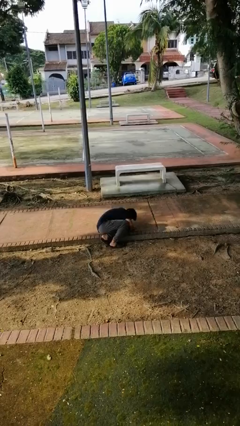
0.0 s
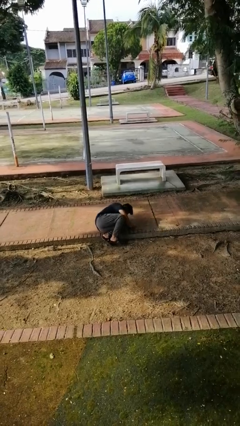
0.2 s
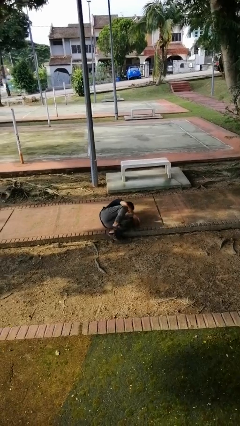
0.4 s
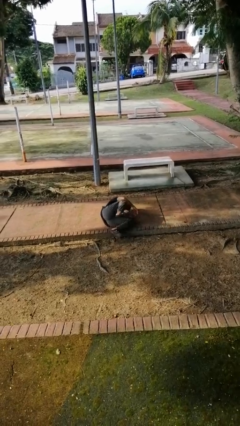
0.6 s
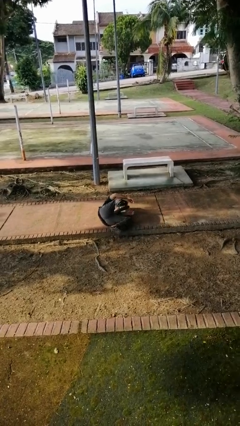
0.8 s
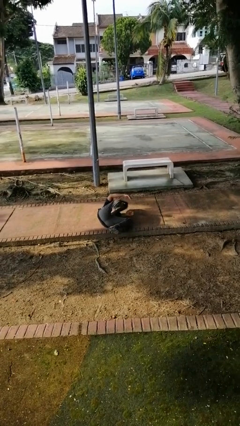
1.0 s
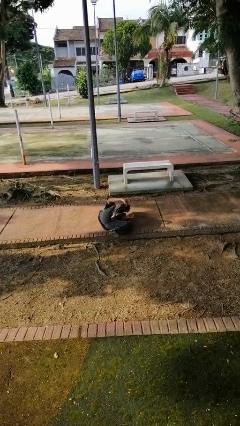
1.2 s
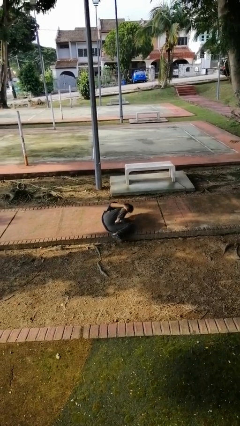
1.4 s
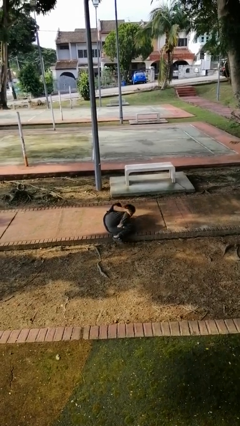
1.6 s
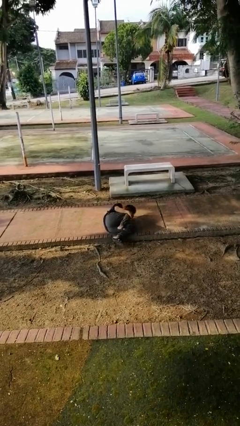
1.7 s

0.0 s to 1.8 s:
person lies down on floor

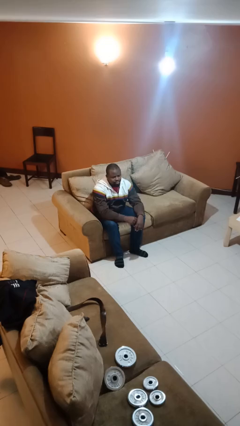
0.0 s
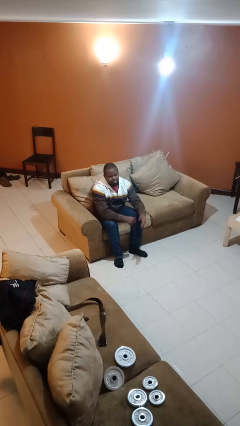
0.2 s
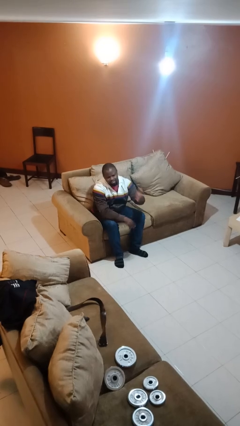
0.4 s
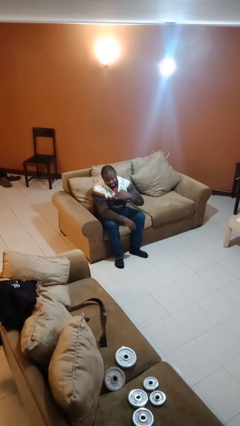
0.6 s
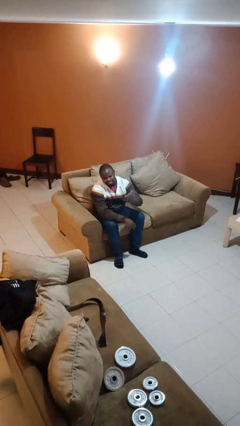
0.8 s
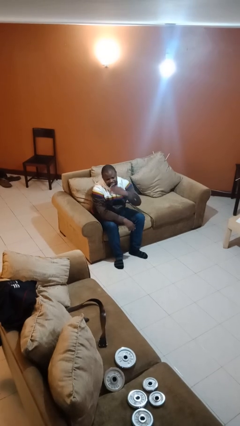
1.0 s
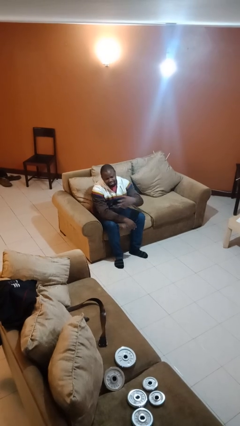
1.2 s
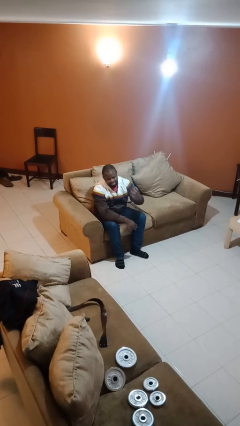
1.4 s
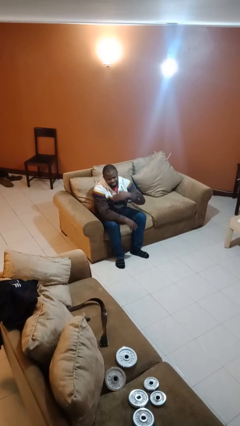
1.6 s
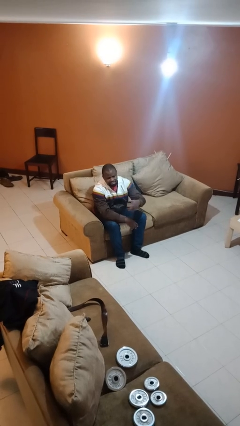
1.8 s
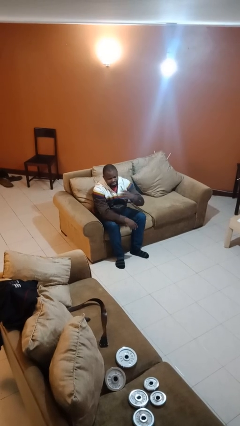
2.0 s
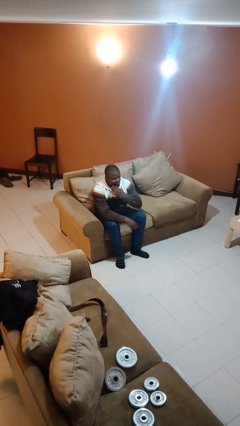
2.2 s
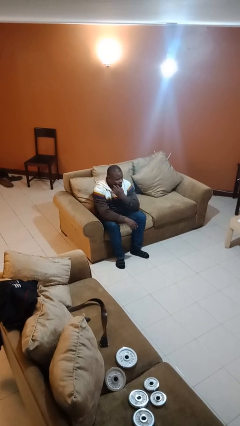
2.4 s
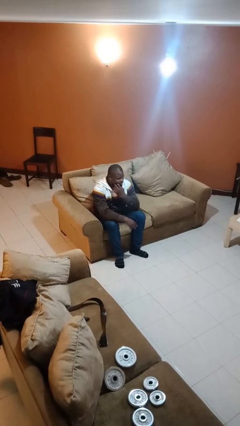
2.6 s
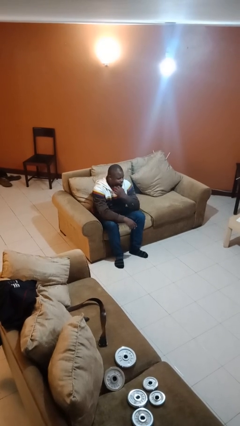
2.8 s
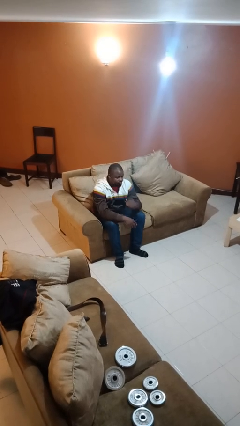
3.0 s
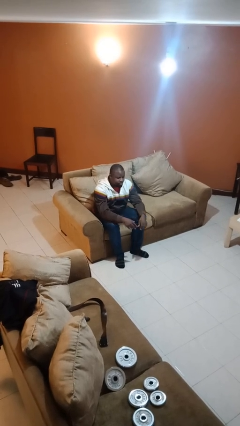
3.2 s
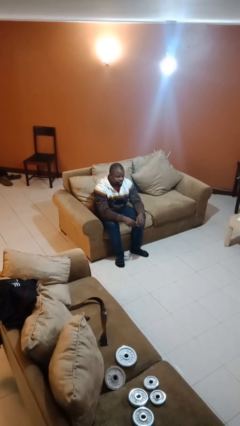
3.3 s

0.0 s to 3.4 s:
person gestures come here

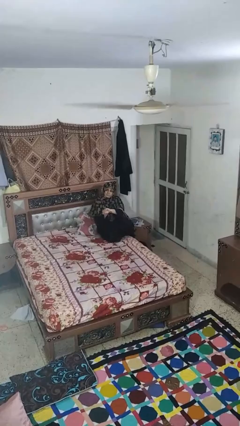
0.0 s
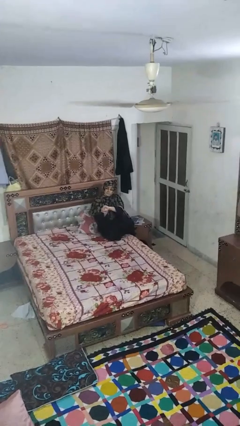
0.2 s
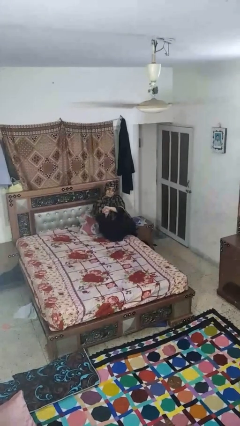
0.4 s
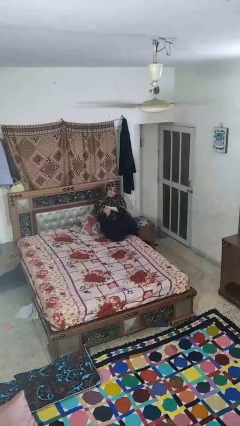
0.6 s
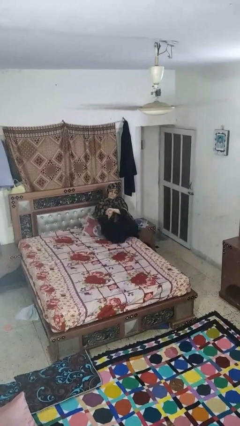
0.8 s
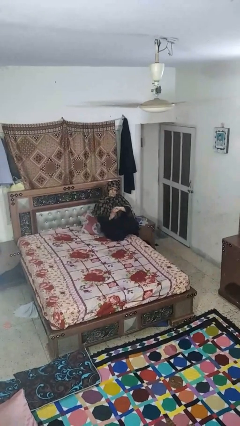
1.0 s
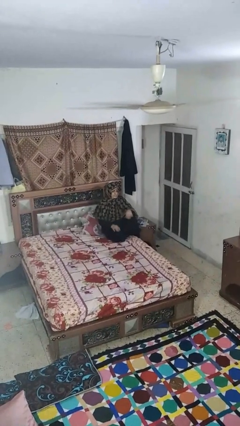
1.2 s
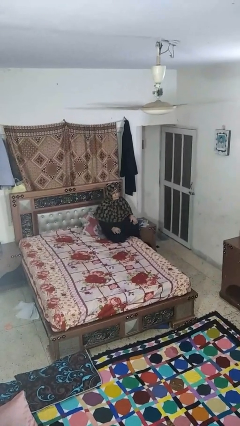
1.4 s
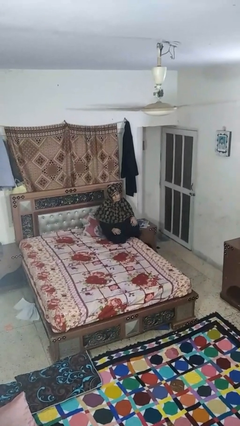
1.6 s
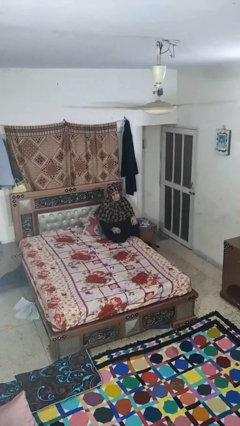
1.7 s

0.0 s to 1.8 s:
person looks at wristwatch

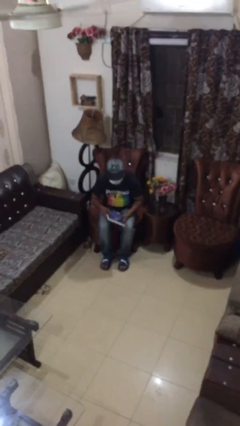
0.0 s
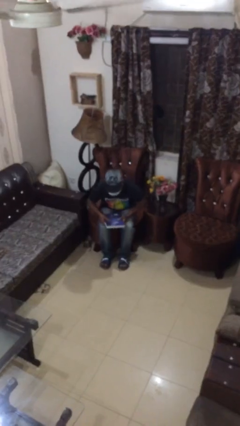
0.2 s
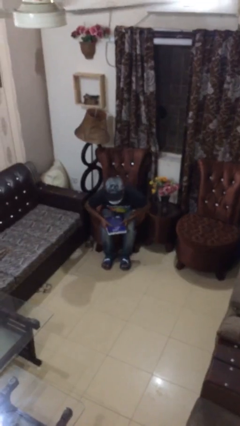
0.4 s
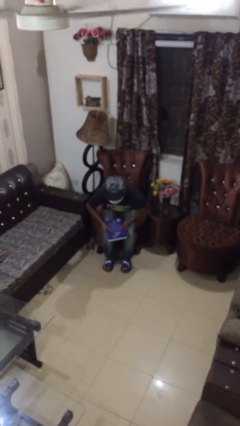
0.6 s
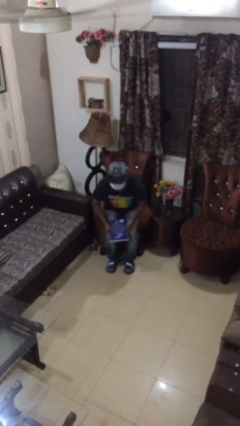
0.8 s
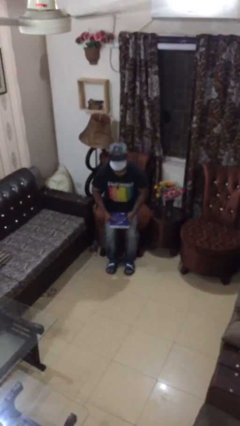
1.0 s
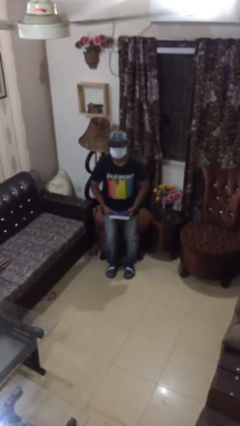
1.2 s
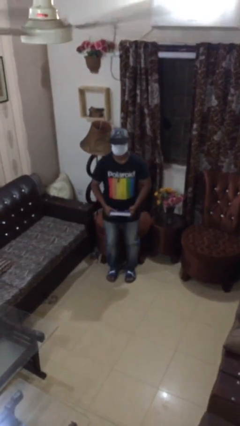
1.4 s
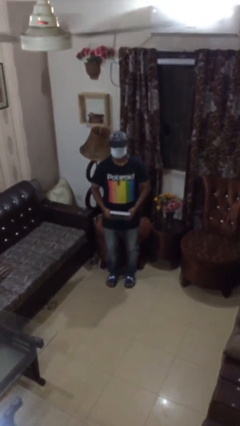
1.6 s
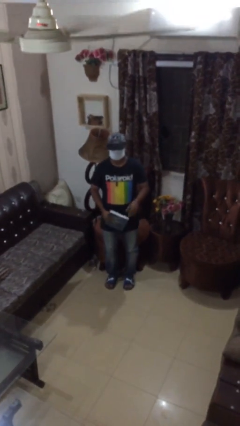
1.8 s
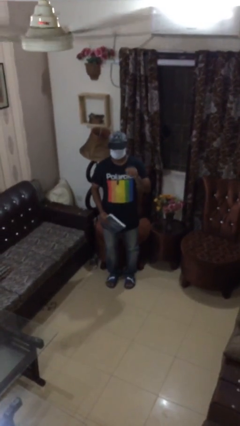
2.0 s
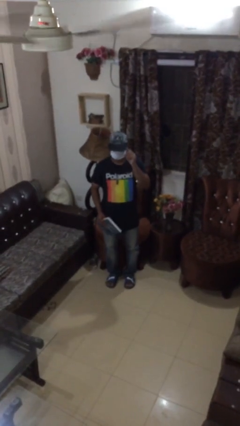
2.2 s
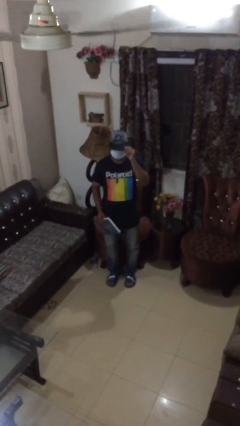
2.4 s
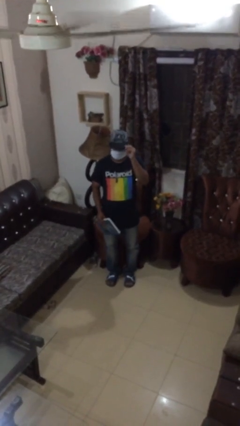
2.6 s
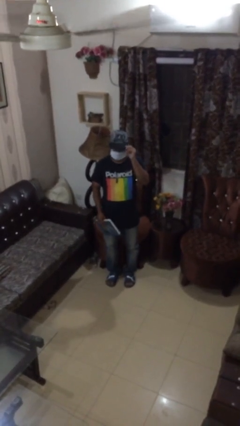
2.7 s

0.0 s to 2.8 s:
person stands up

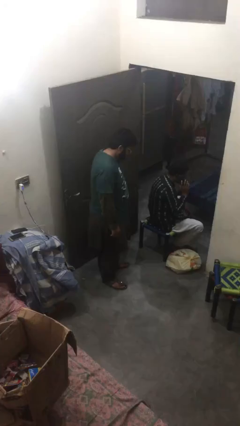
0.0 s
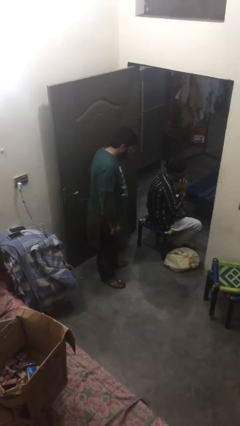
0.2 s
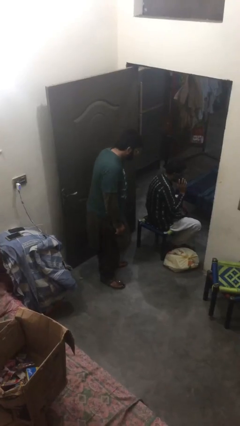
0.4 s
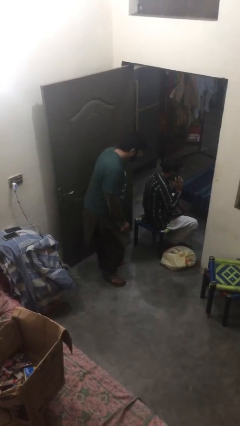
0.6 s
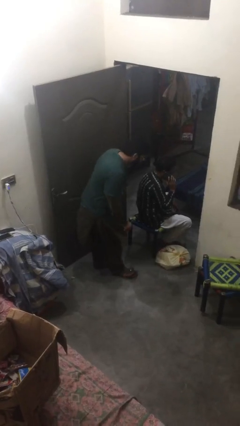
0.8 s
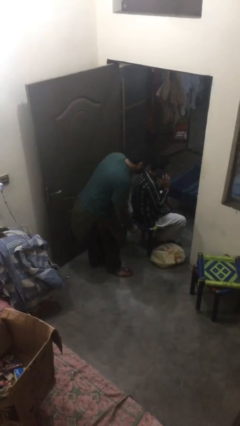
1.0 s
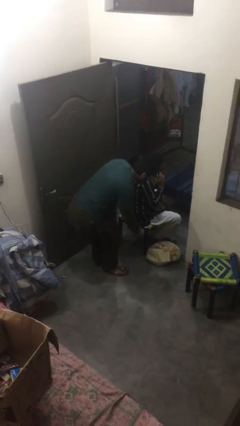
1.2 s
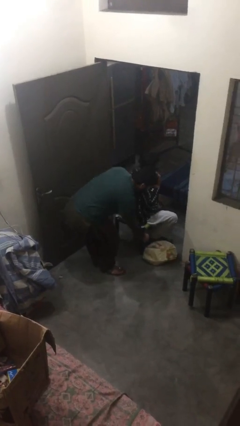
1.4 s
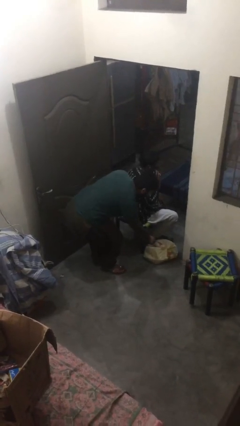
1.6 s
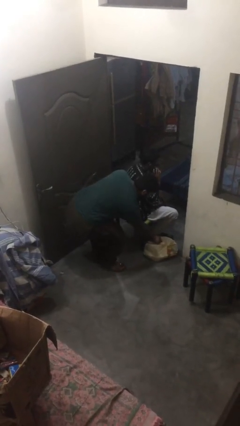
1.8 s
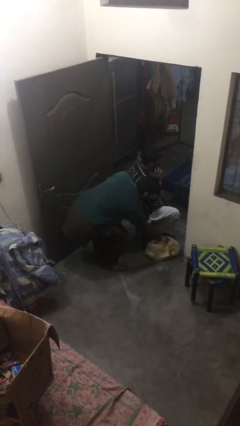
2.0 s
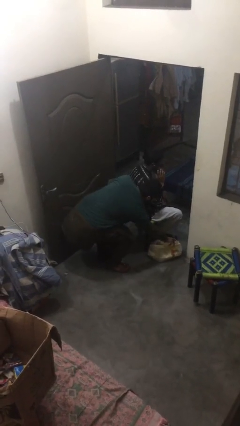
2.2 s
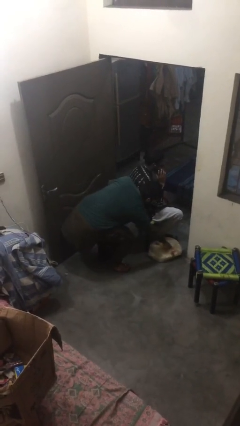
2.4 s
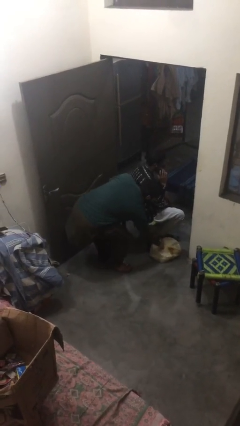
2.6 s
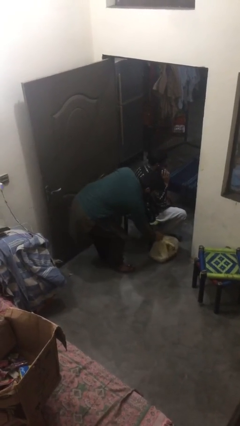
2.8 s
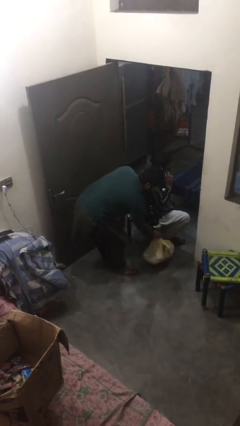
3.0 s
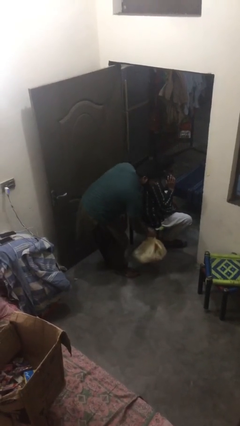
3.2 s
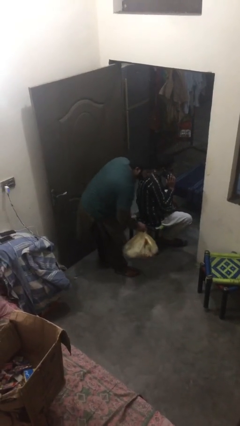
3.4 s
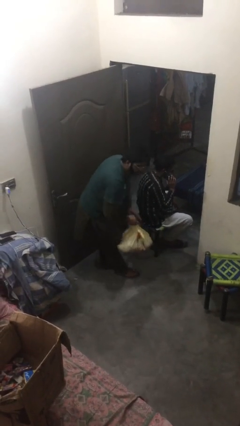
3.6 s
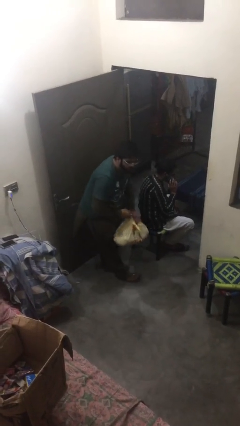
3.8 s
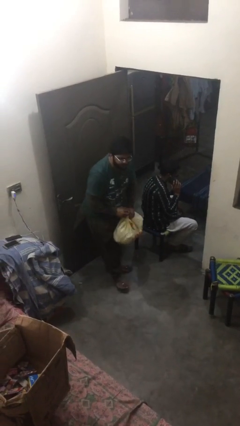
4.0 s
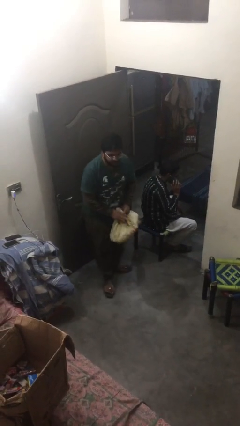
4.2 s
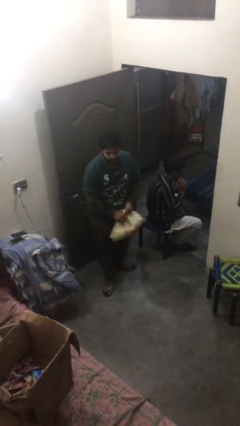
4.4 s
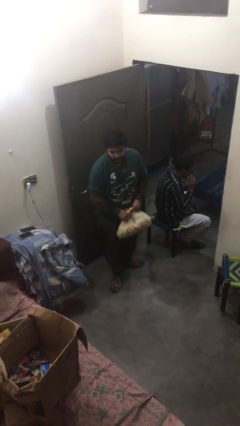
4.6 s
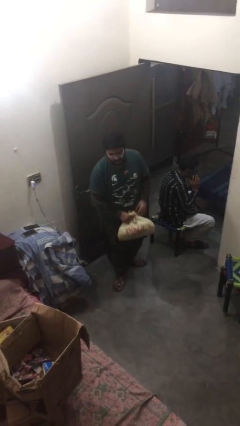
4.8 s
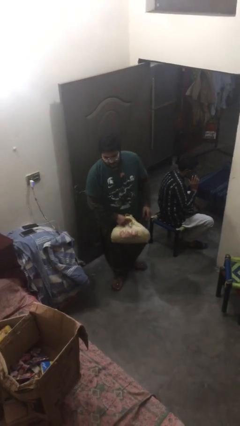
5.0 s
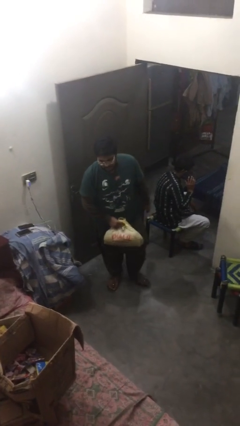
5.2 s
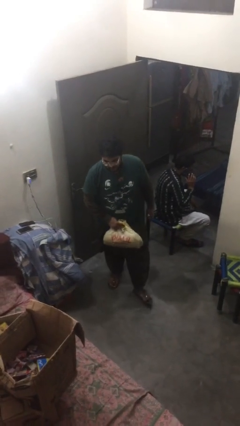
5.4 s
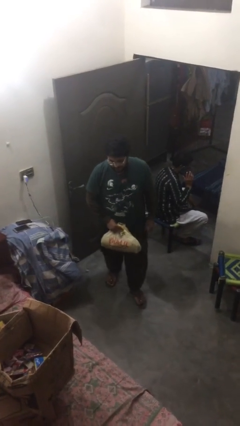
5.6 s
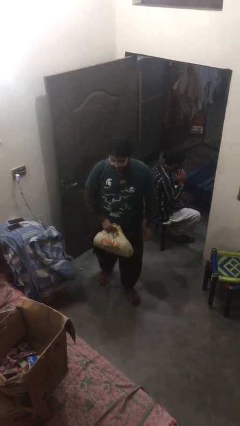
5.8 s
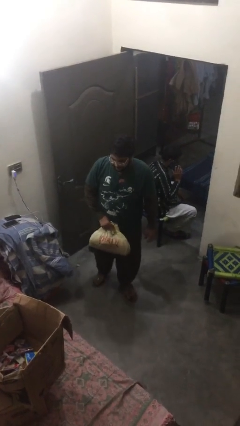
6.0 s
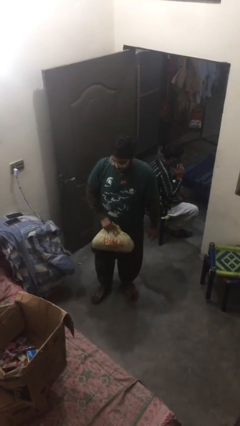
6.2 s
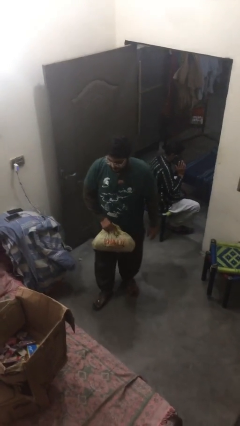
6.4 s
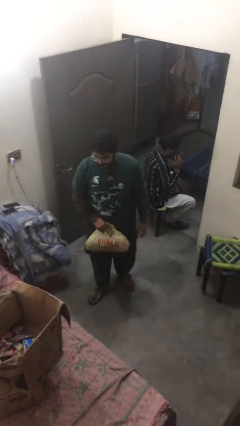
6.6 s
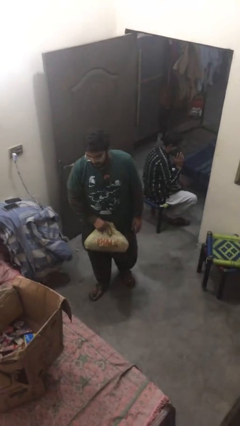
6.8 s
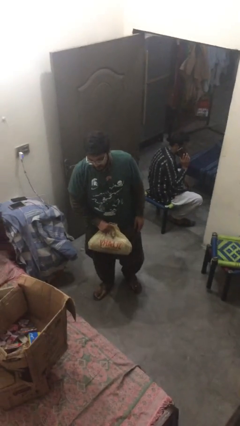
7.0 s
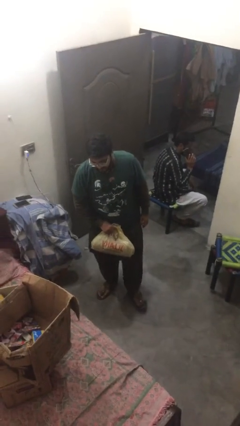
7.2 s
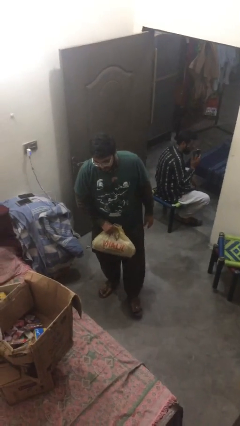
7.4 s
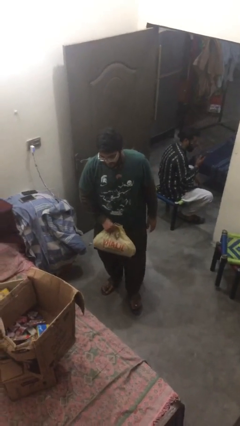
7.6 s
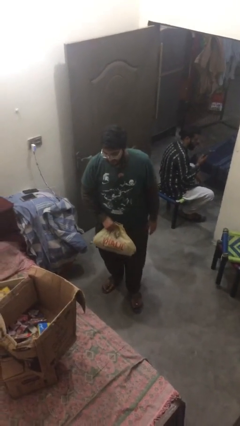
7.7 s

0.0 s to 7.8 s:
person steals object from person
